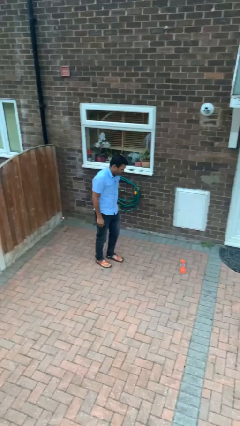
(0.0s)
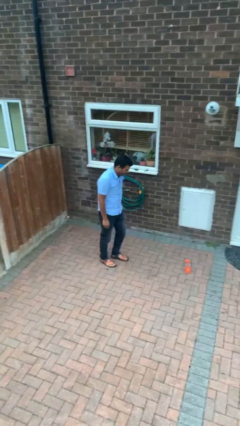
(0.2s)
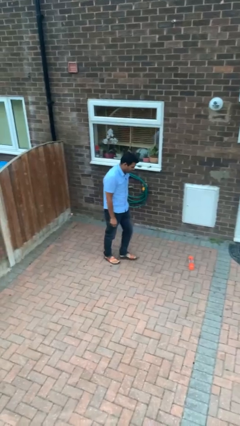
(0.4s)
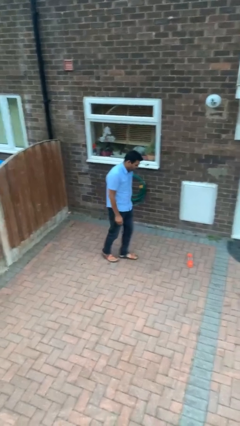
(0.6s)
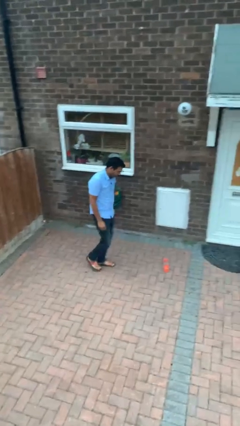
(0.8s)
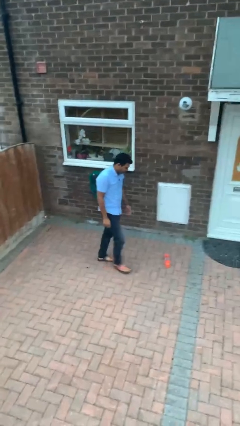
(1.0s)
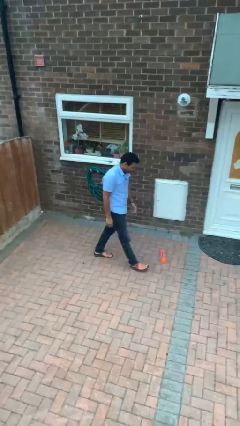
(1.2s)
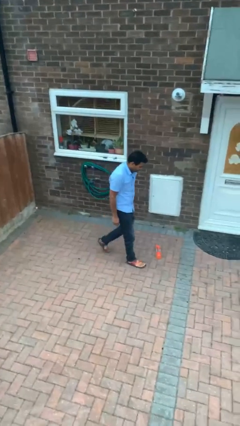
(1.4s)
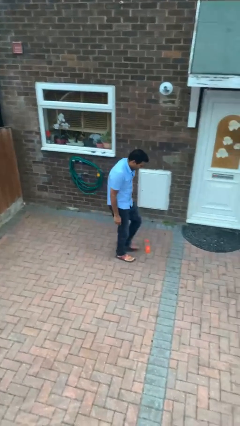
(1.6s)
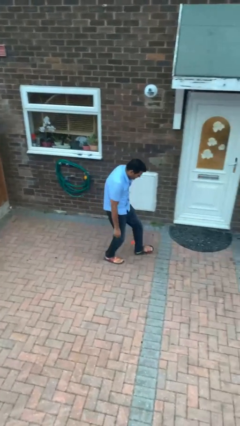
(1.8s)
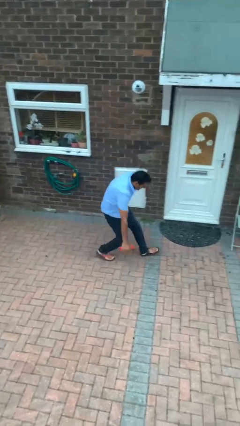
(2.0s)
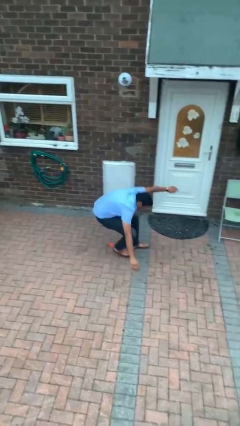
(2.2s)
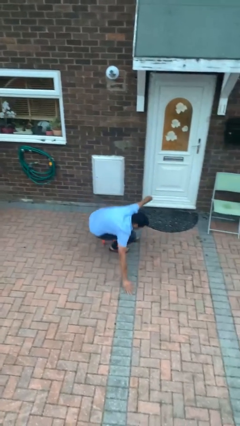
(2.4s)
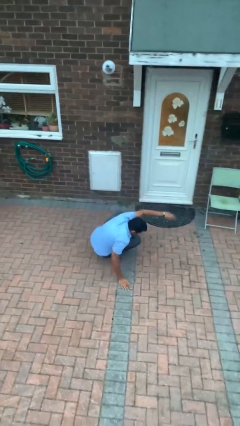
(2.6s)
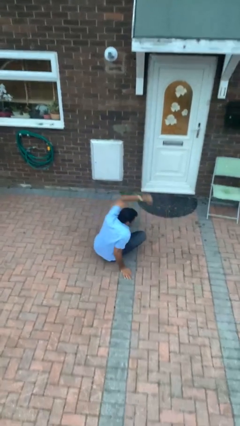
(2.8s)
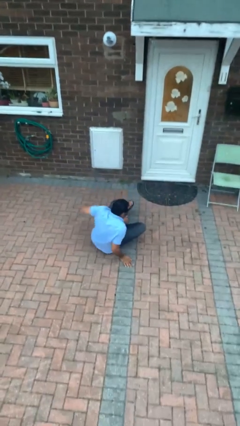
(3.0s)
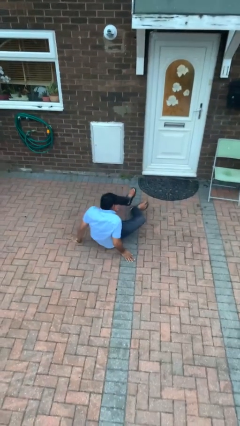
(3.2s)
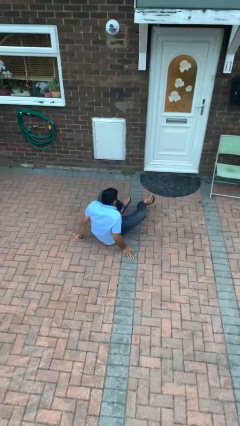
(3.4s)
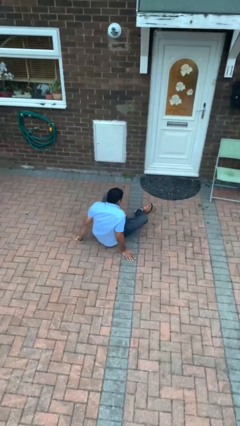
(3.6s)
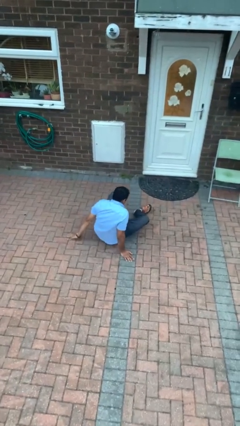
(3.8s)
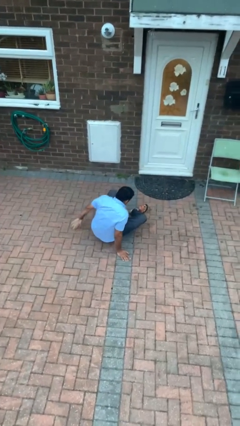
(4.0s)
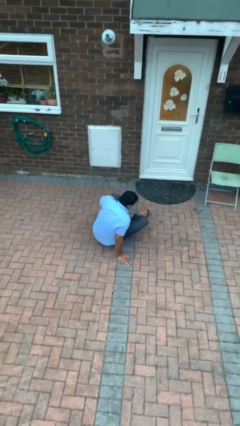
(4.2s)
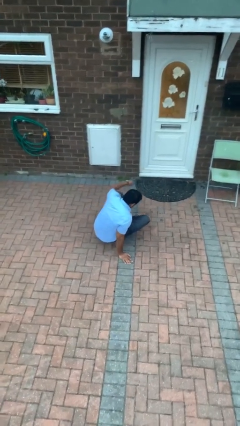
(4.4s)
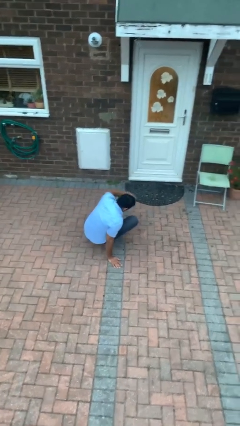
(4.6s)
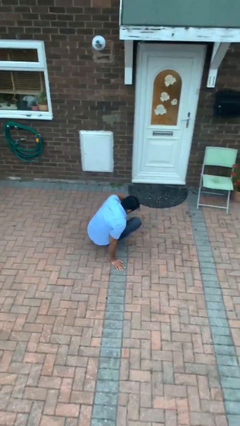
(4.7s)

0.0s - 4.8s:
person trips on object on floor

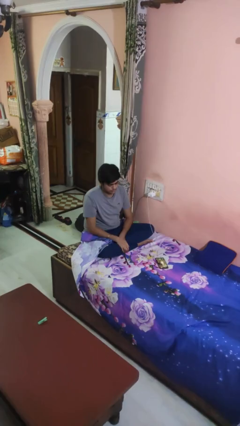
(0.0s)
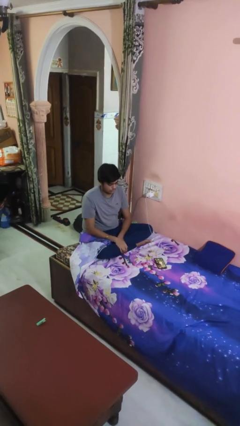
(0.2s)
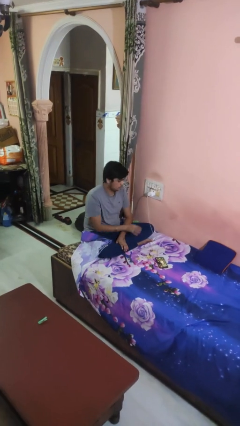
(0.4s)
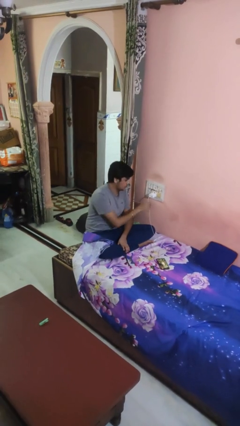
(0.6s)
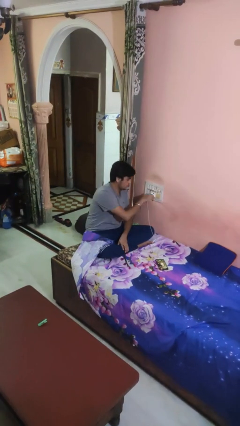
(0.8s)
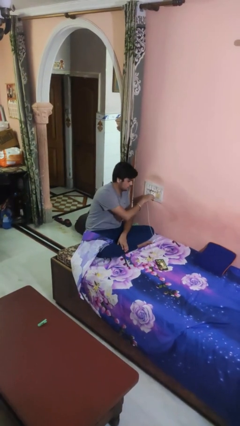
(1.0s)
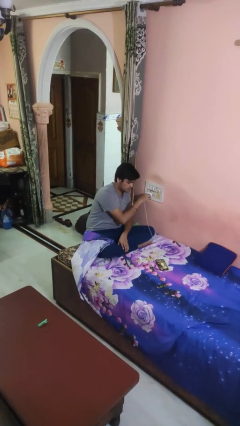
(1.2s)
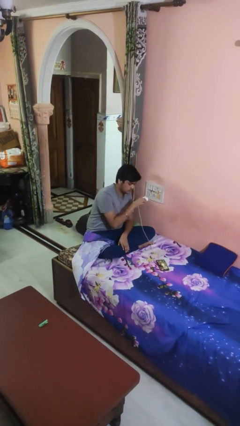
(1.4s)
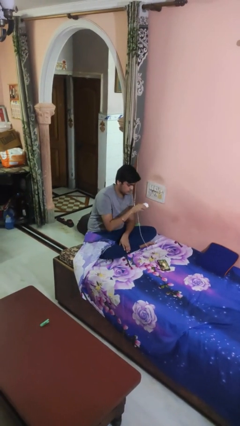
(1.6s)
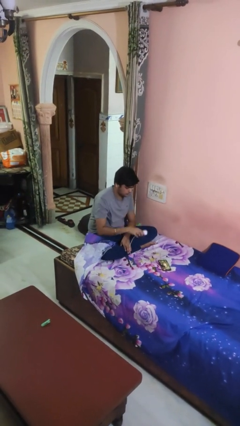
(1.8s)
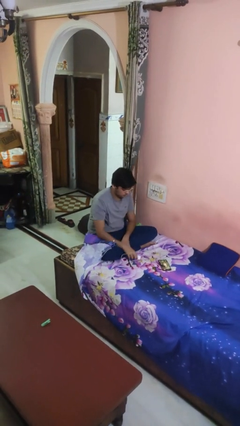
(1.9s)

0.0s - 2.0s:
person unplugs from electrical socket

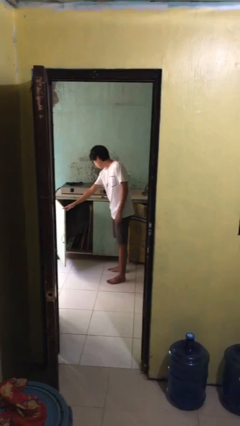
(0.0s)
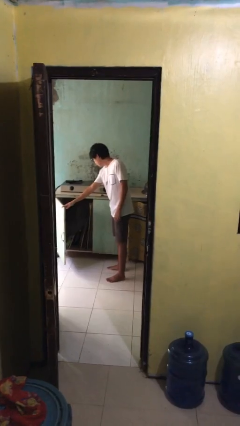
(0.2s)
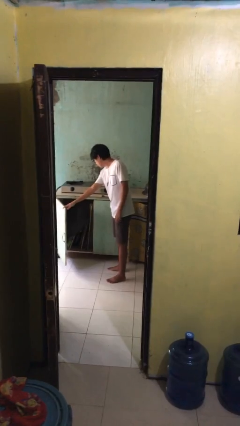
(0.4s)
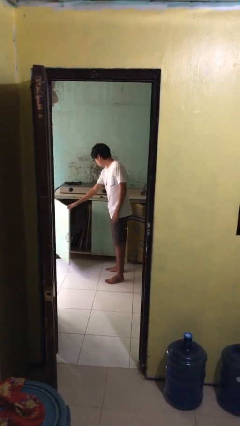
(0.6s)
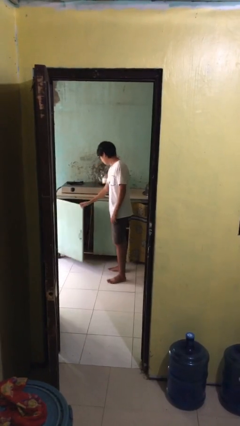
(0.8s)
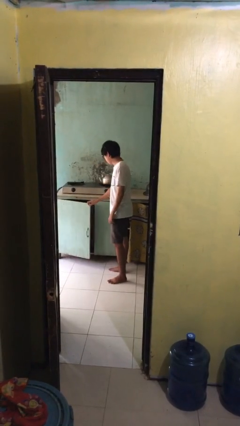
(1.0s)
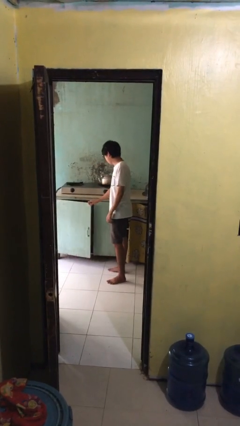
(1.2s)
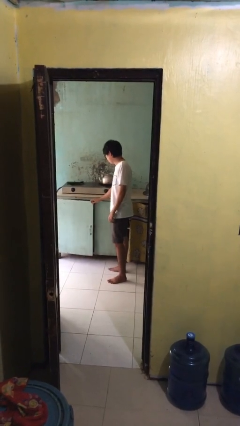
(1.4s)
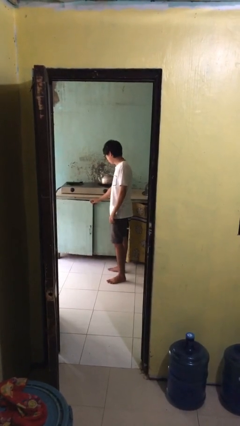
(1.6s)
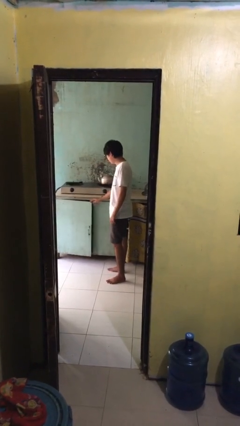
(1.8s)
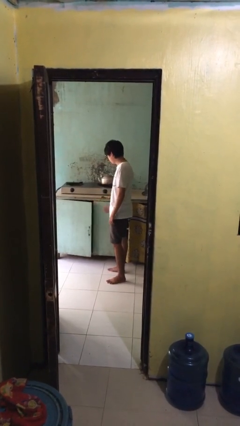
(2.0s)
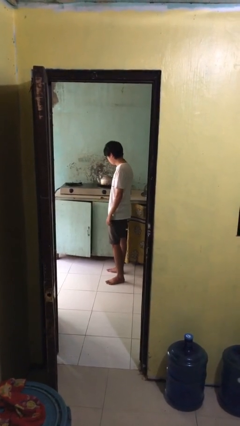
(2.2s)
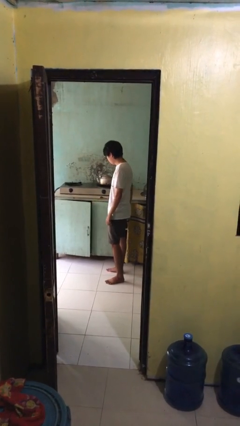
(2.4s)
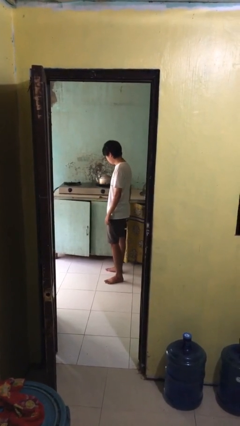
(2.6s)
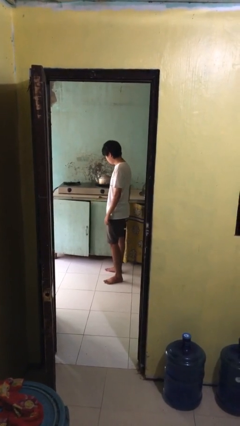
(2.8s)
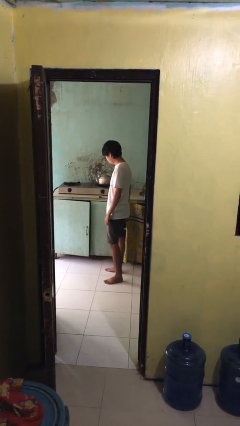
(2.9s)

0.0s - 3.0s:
person closes cabinet

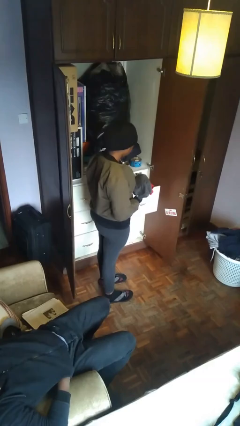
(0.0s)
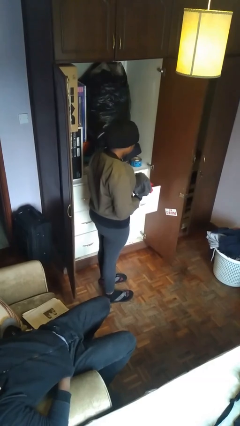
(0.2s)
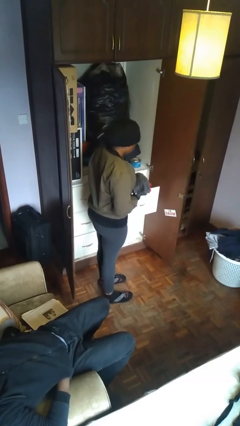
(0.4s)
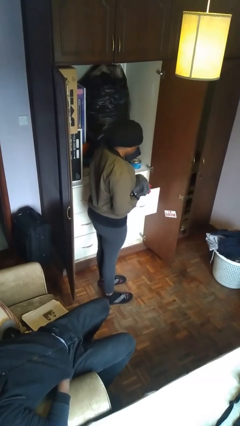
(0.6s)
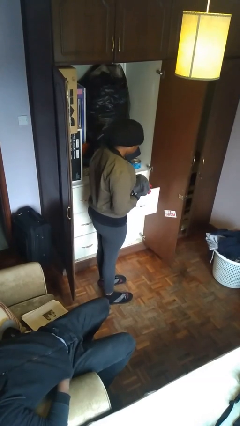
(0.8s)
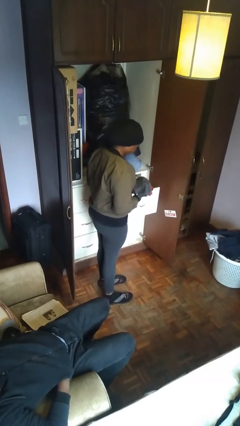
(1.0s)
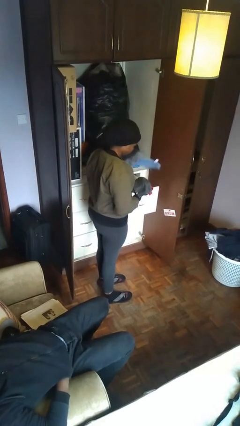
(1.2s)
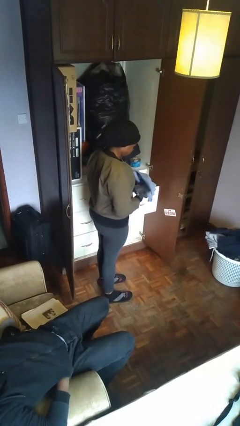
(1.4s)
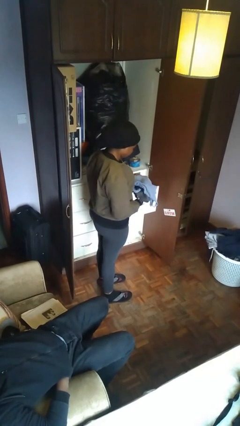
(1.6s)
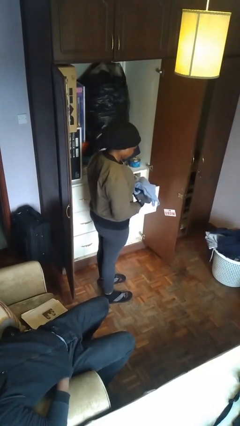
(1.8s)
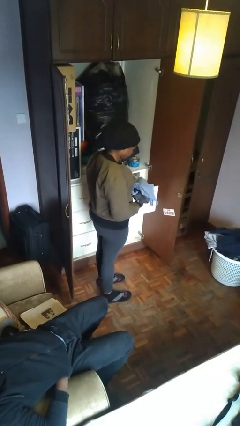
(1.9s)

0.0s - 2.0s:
person takes clothes from dresser

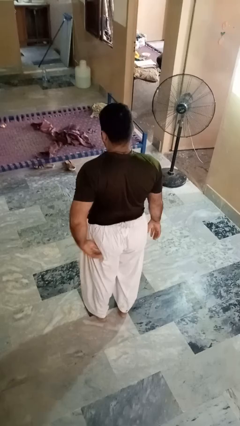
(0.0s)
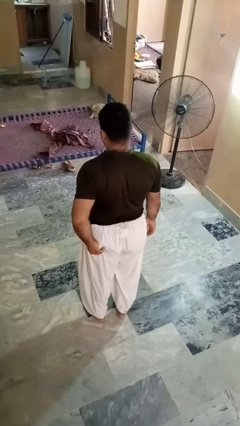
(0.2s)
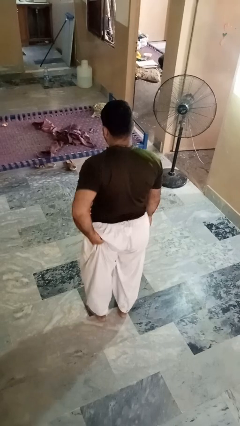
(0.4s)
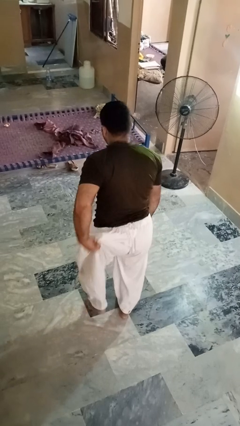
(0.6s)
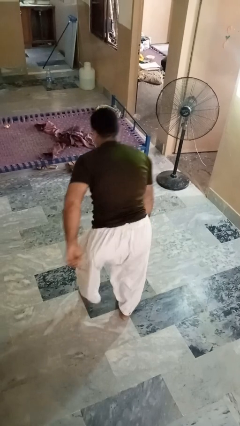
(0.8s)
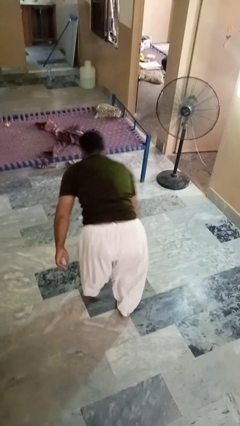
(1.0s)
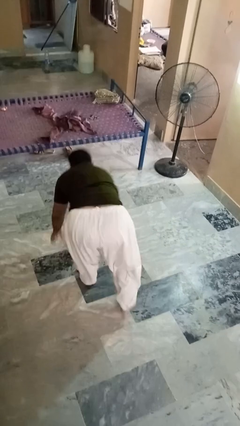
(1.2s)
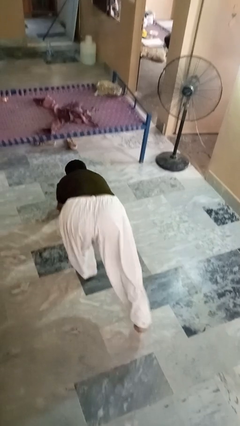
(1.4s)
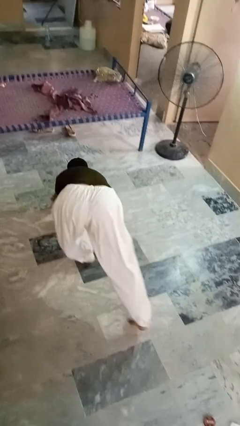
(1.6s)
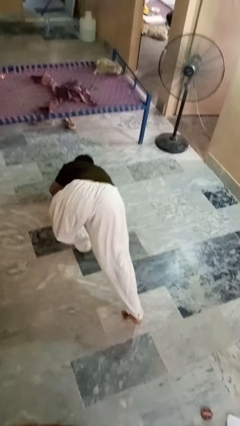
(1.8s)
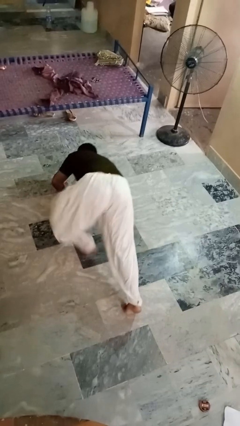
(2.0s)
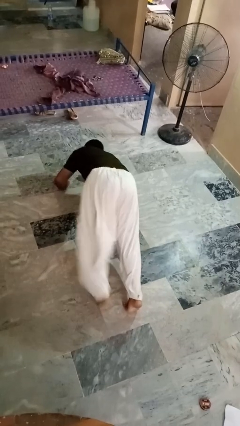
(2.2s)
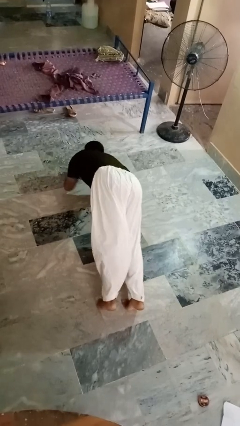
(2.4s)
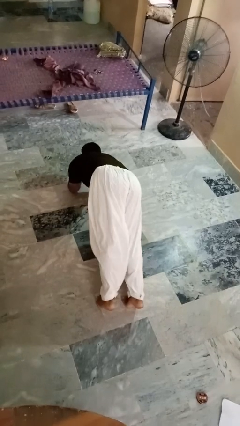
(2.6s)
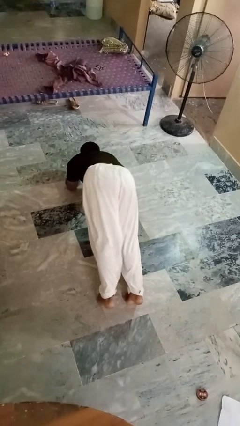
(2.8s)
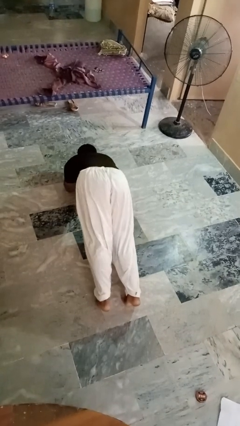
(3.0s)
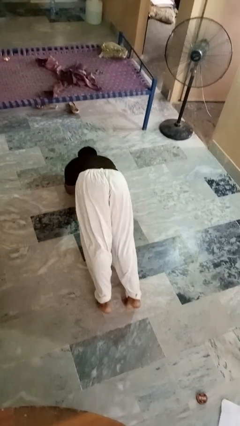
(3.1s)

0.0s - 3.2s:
person exercises with plank

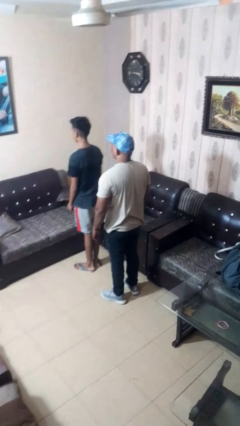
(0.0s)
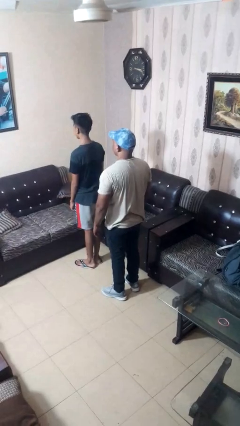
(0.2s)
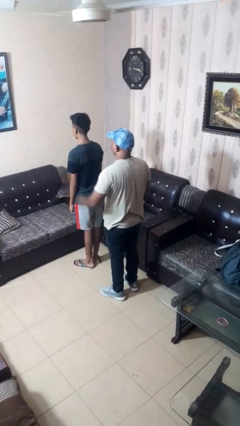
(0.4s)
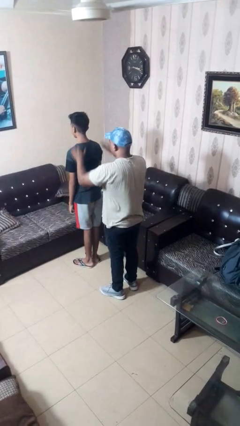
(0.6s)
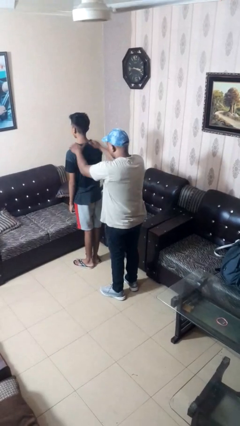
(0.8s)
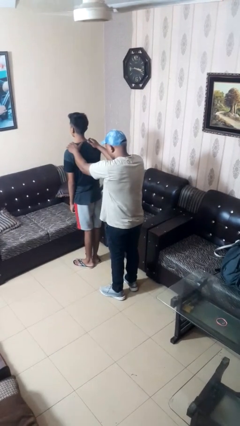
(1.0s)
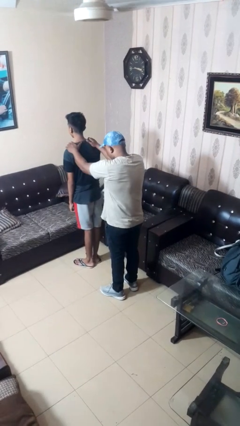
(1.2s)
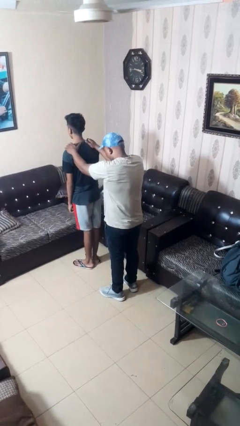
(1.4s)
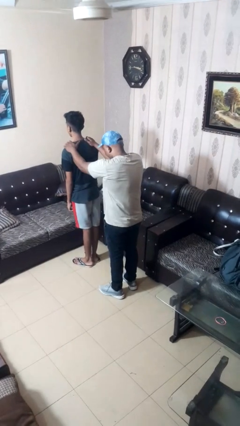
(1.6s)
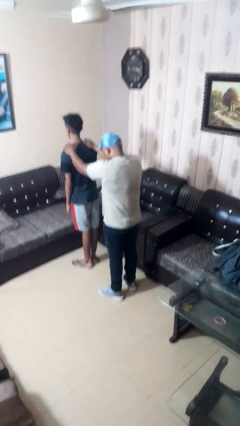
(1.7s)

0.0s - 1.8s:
person grabs person by shoulder

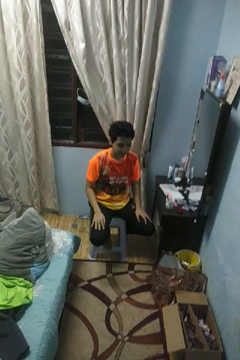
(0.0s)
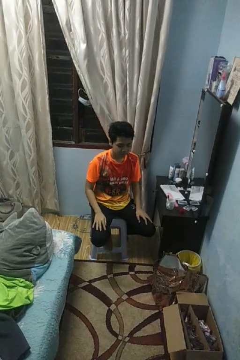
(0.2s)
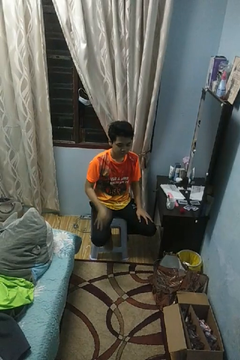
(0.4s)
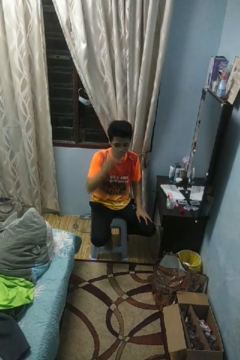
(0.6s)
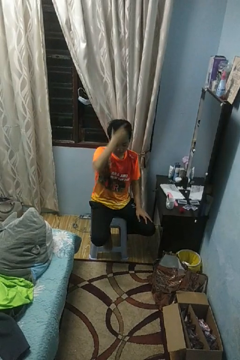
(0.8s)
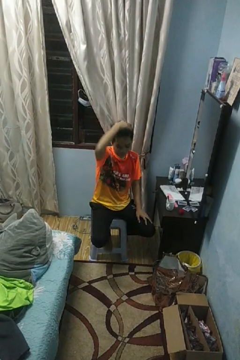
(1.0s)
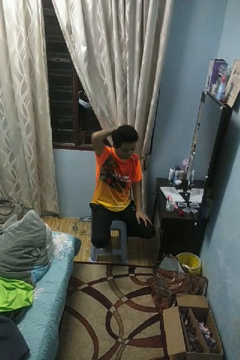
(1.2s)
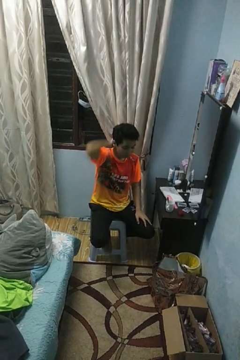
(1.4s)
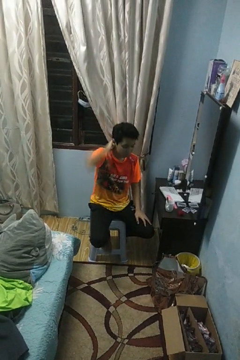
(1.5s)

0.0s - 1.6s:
person strokes hair
